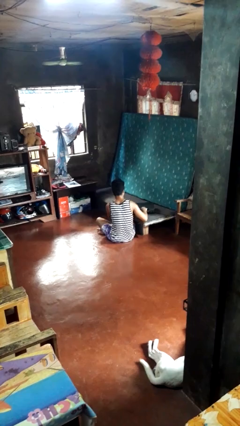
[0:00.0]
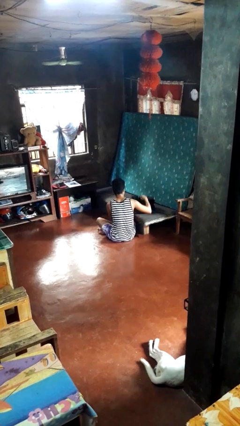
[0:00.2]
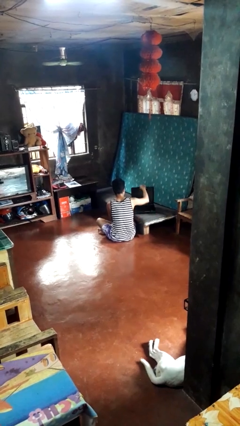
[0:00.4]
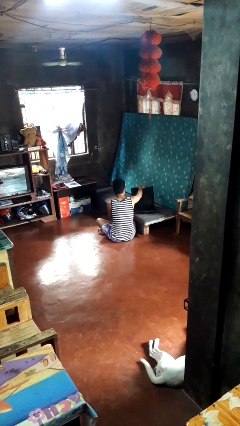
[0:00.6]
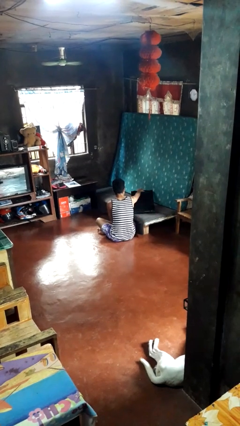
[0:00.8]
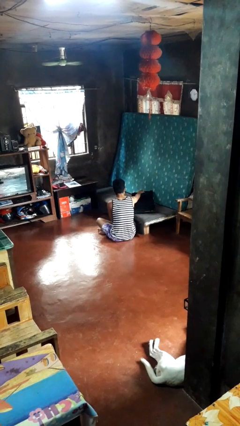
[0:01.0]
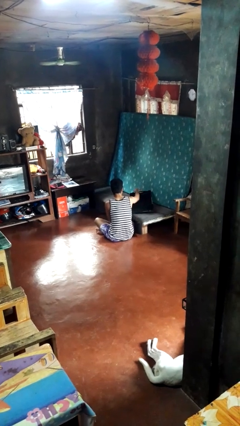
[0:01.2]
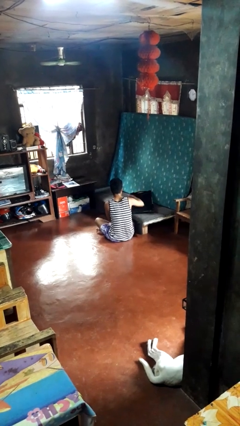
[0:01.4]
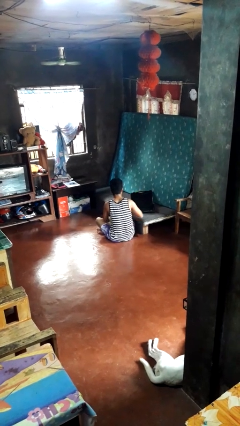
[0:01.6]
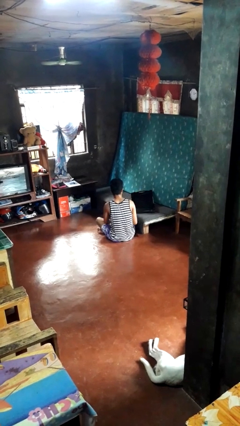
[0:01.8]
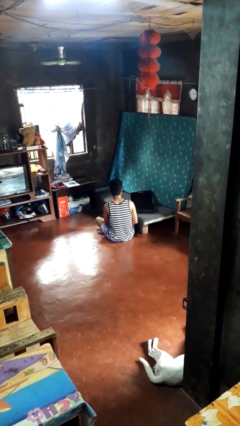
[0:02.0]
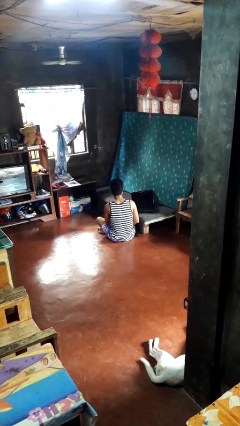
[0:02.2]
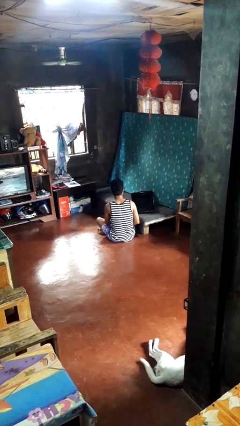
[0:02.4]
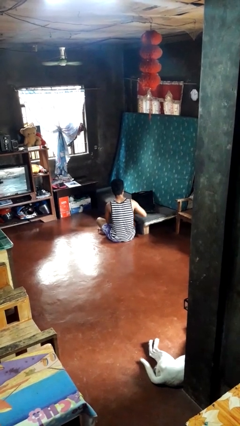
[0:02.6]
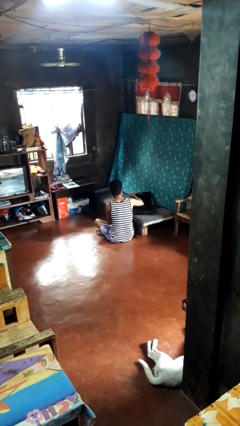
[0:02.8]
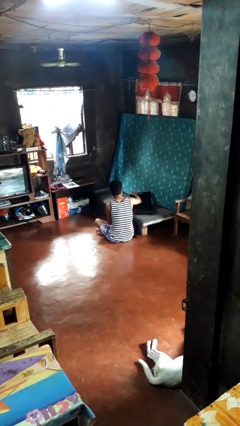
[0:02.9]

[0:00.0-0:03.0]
person opens suitcase

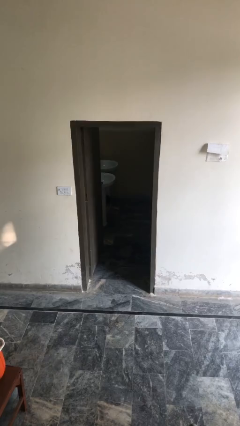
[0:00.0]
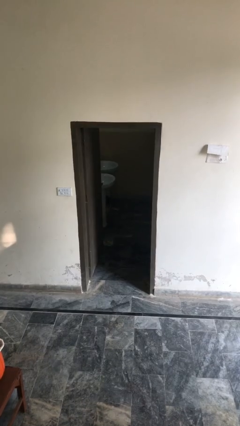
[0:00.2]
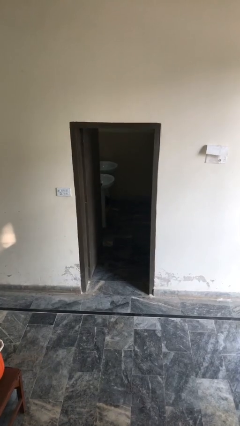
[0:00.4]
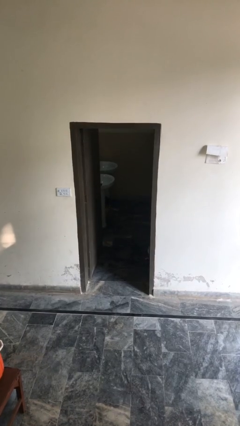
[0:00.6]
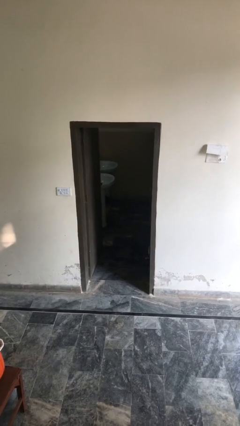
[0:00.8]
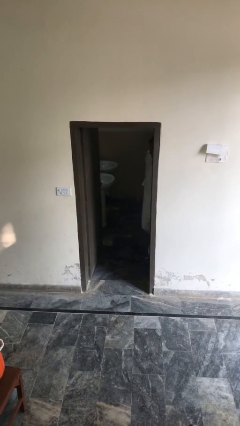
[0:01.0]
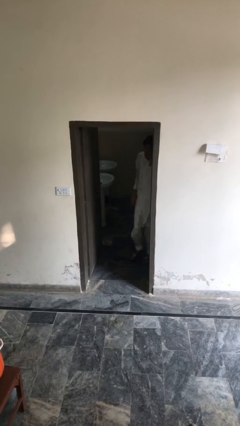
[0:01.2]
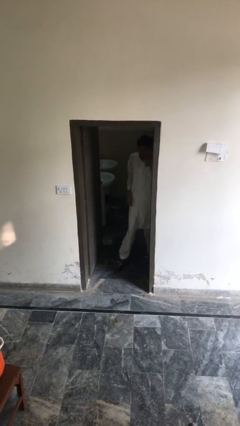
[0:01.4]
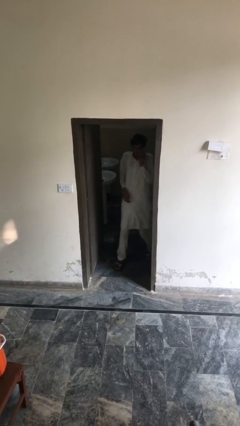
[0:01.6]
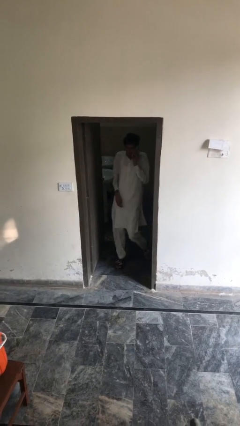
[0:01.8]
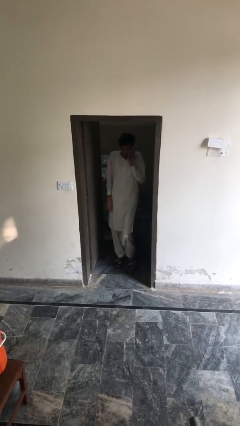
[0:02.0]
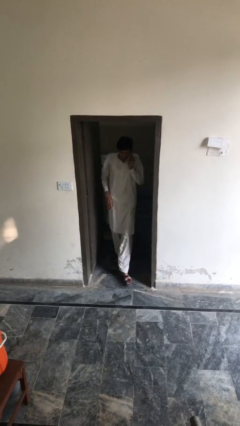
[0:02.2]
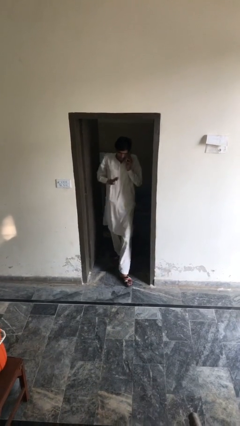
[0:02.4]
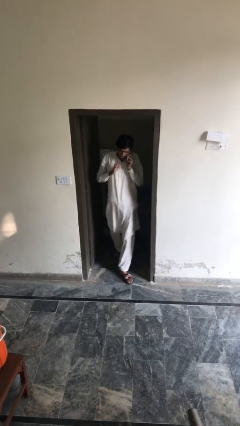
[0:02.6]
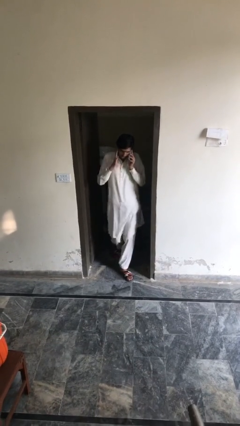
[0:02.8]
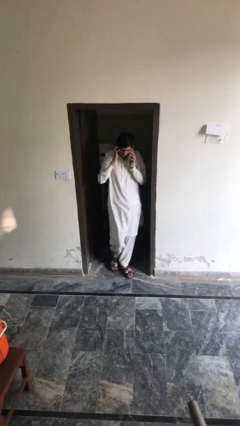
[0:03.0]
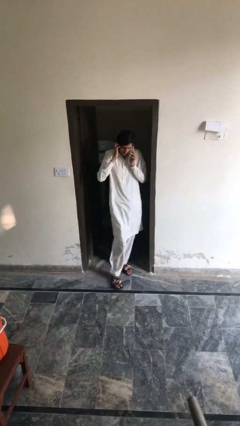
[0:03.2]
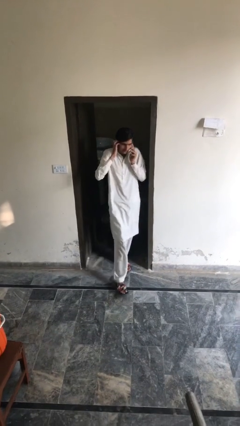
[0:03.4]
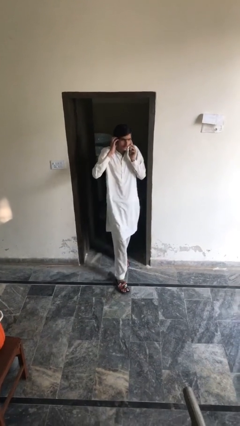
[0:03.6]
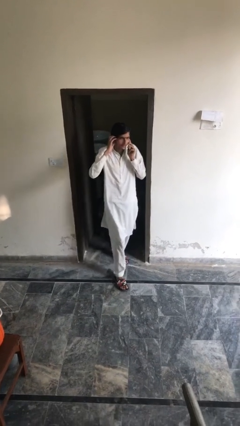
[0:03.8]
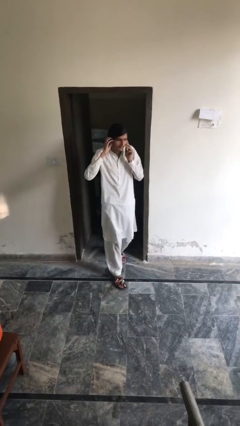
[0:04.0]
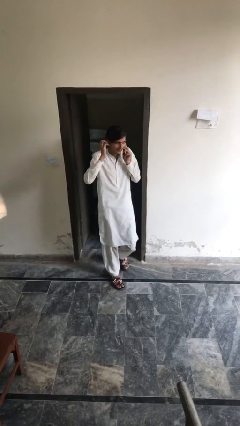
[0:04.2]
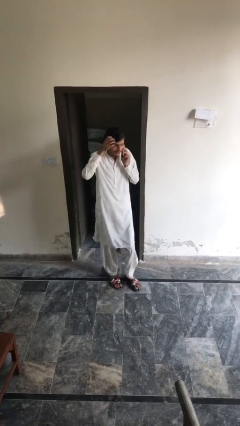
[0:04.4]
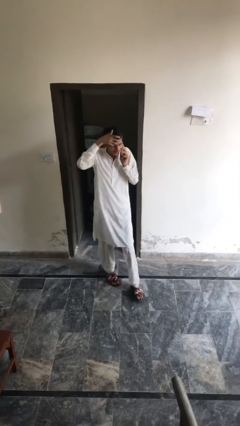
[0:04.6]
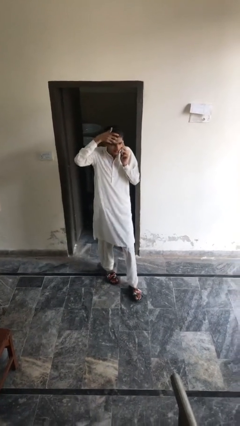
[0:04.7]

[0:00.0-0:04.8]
person enters scene through structure

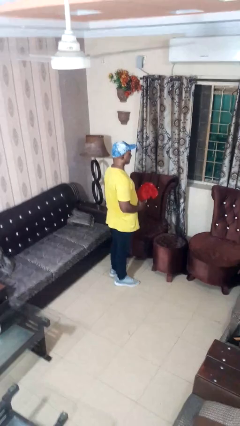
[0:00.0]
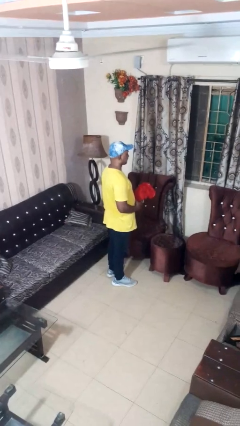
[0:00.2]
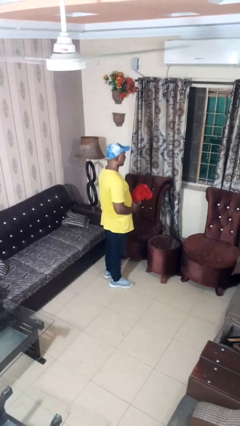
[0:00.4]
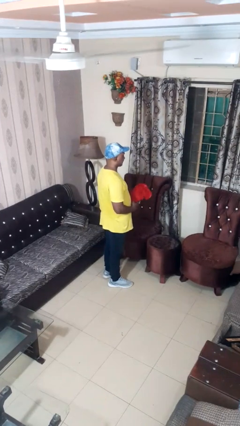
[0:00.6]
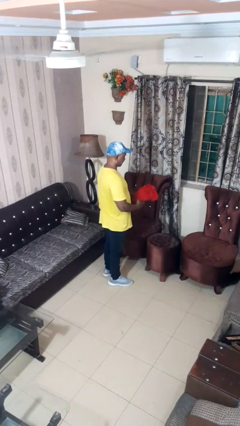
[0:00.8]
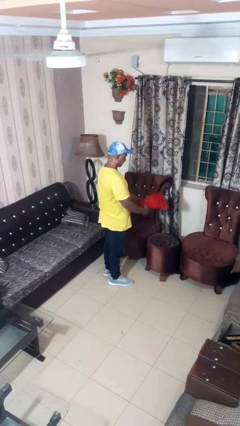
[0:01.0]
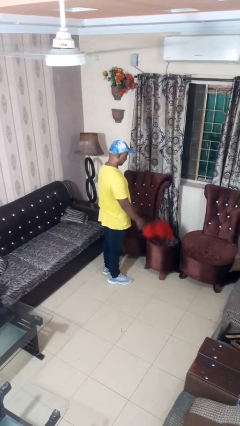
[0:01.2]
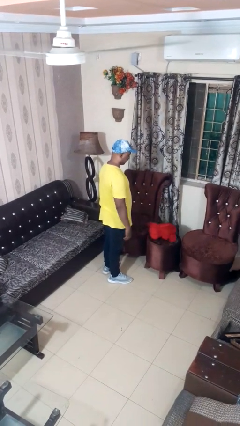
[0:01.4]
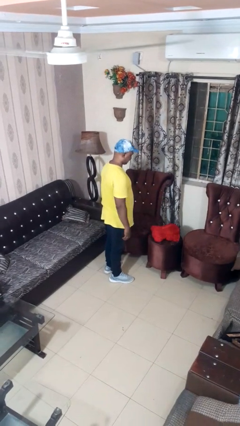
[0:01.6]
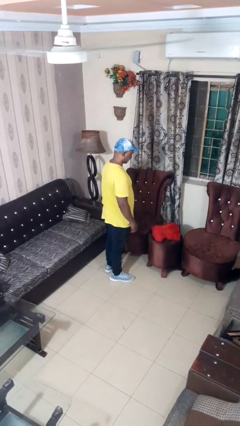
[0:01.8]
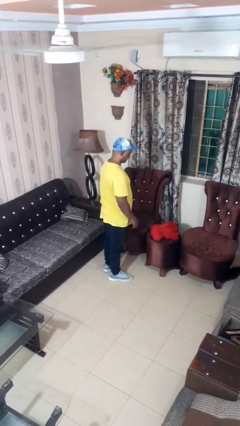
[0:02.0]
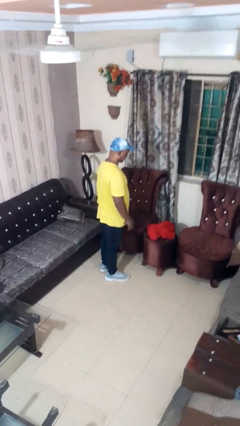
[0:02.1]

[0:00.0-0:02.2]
person throws object on table

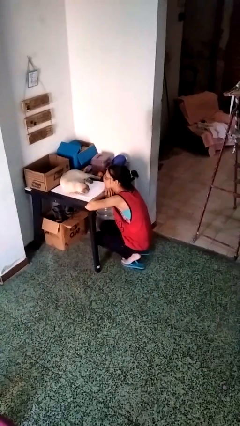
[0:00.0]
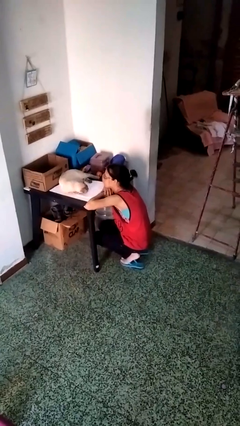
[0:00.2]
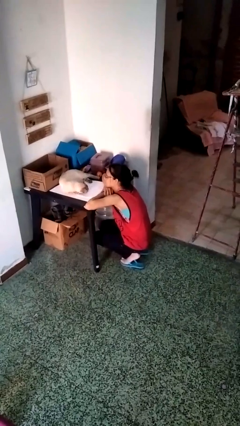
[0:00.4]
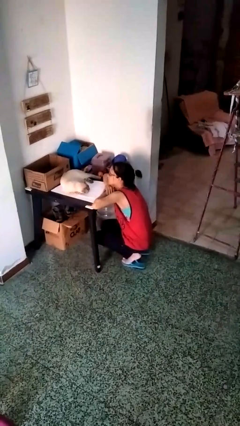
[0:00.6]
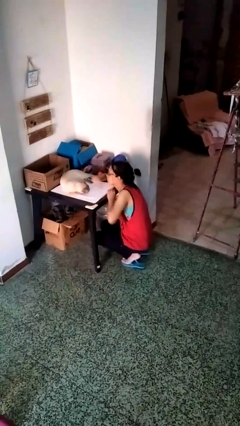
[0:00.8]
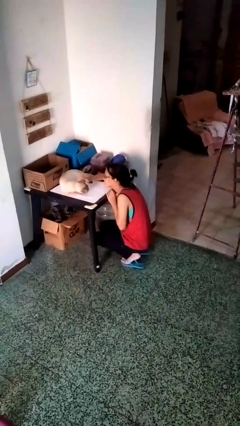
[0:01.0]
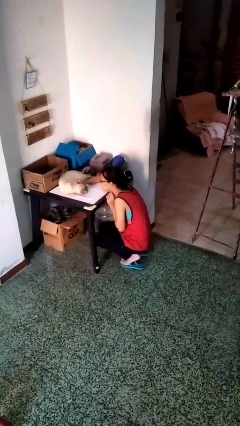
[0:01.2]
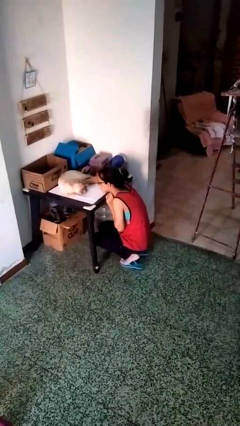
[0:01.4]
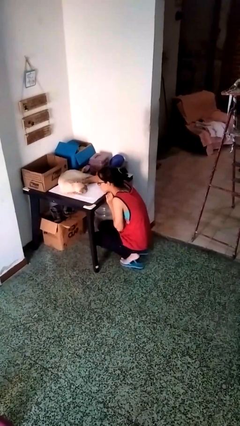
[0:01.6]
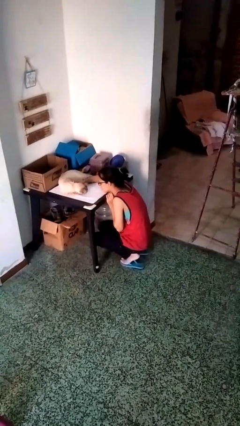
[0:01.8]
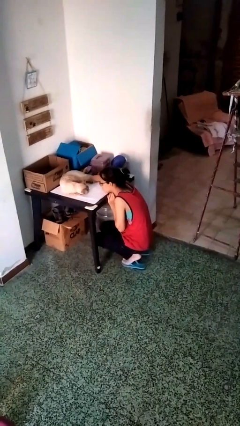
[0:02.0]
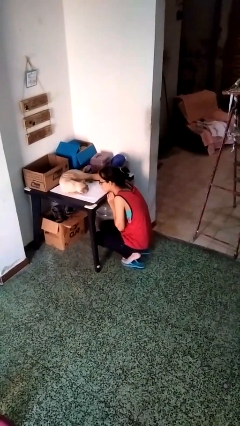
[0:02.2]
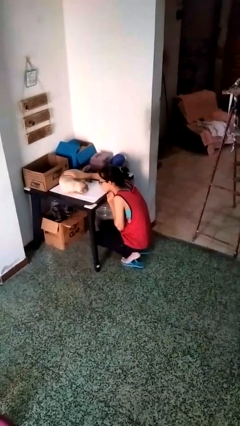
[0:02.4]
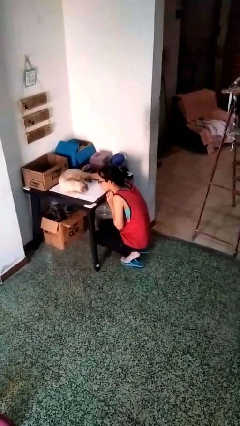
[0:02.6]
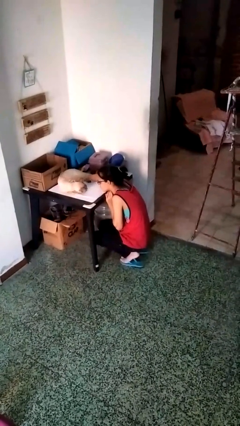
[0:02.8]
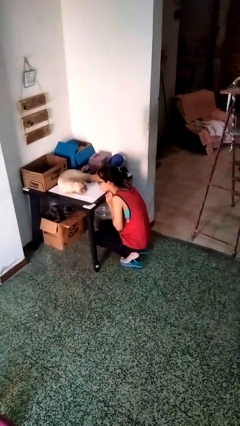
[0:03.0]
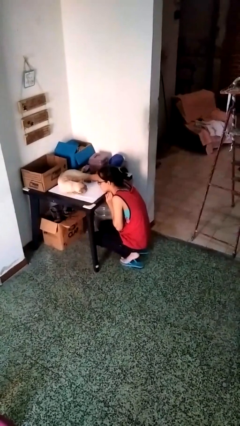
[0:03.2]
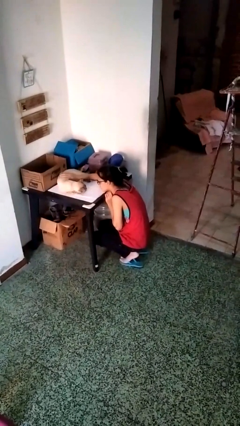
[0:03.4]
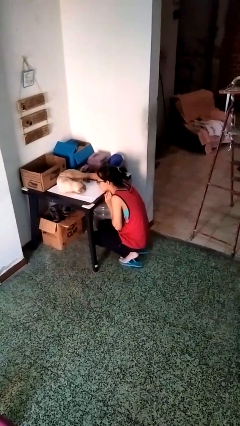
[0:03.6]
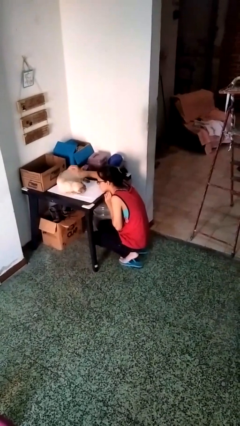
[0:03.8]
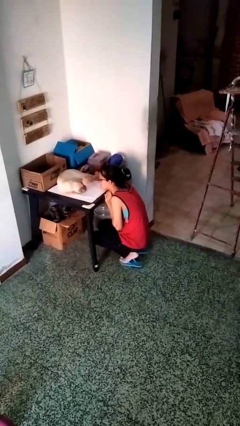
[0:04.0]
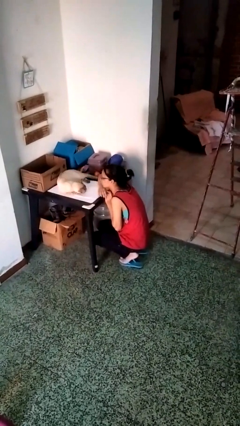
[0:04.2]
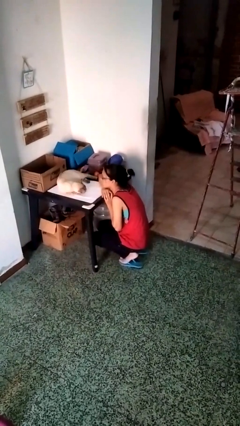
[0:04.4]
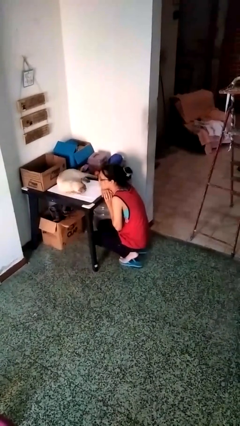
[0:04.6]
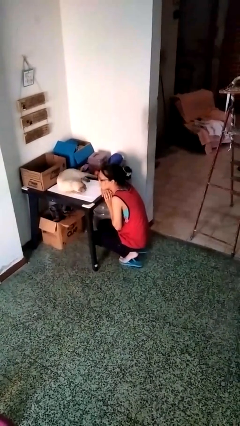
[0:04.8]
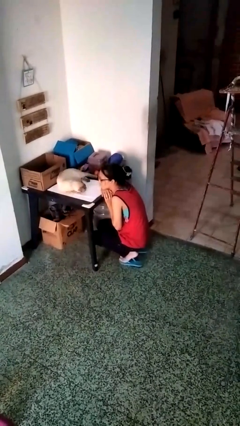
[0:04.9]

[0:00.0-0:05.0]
person pets cat

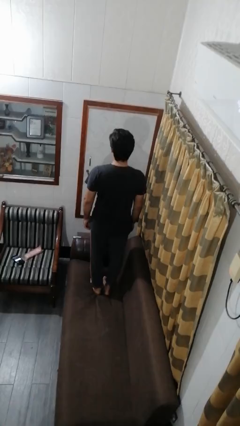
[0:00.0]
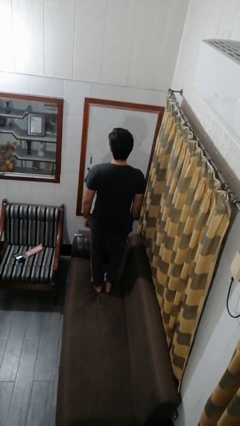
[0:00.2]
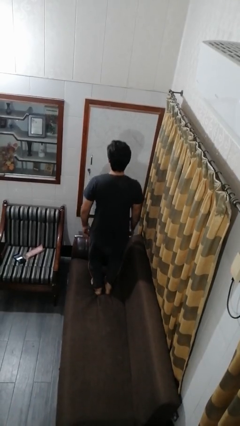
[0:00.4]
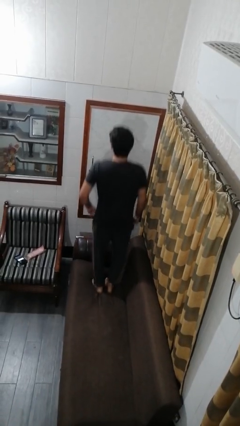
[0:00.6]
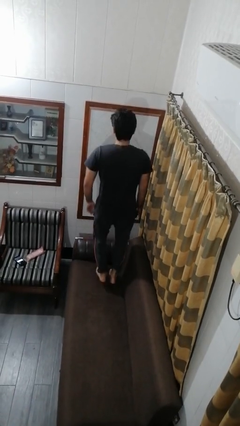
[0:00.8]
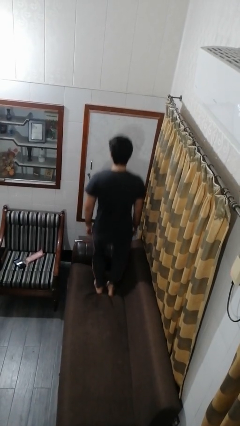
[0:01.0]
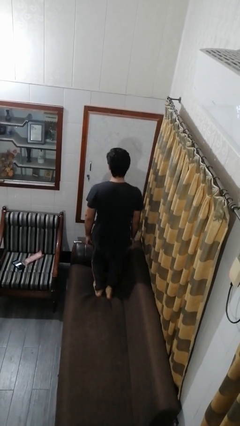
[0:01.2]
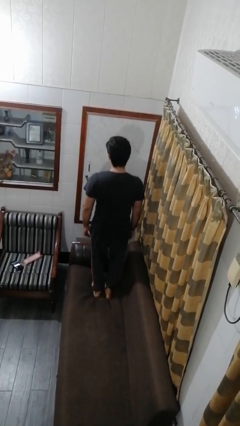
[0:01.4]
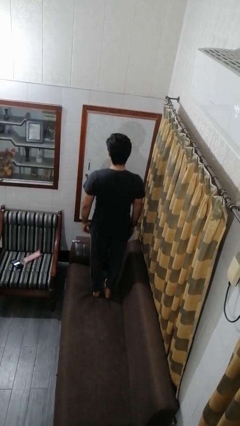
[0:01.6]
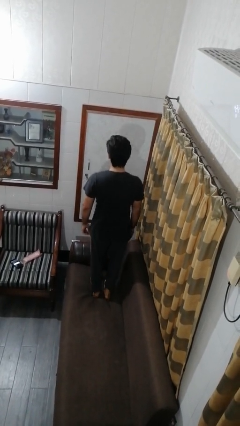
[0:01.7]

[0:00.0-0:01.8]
person jumps on couch

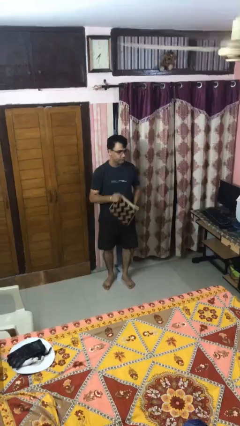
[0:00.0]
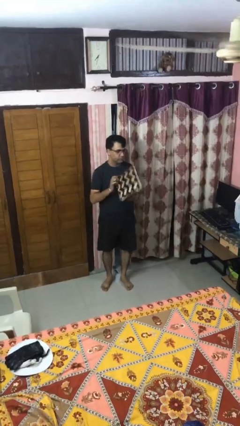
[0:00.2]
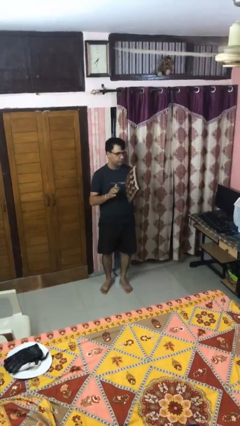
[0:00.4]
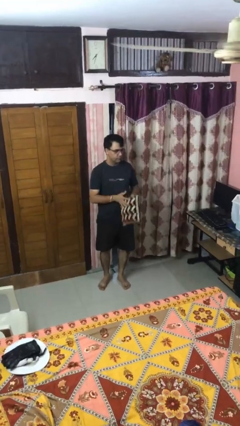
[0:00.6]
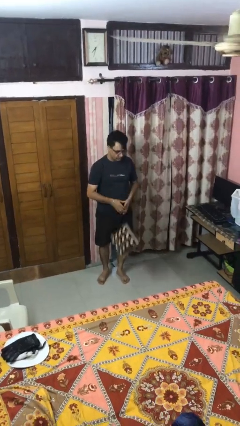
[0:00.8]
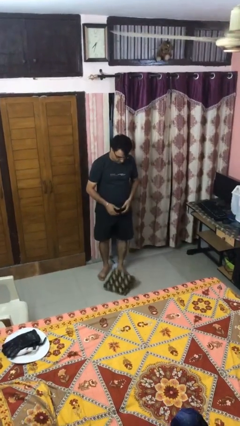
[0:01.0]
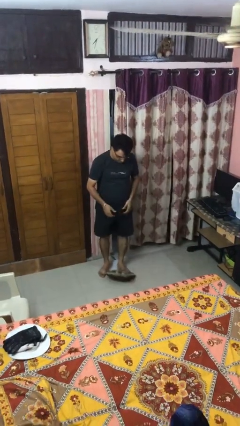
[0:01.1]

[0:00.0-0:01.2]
person drops object
